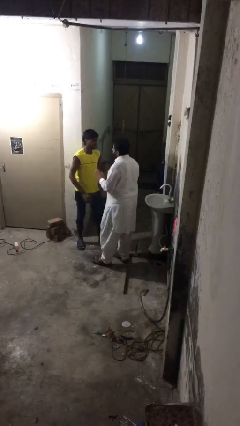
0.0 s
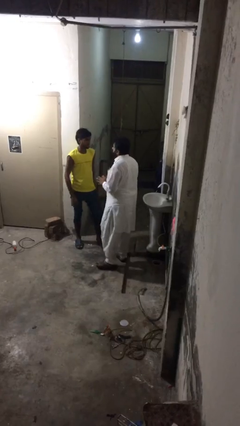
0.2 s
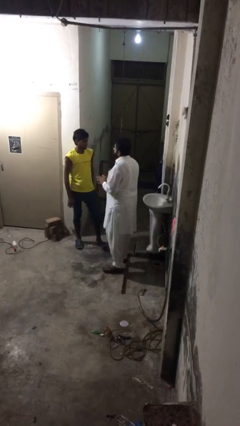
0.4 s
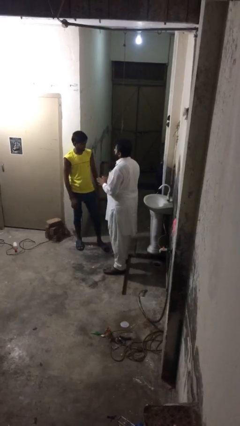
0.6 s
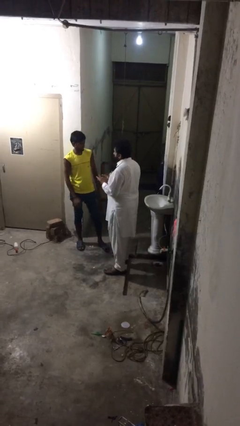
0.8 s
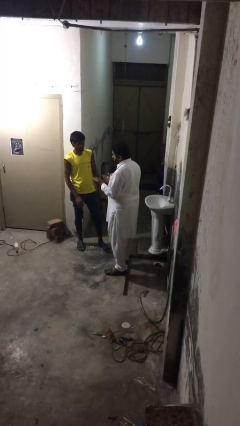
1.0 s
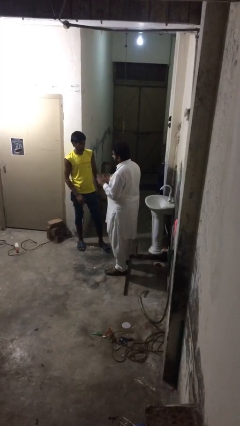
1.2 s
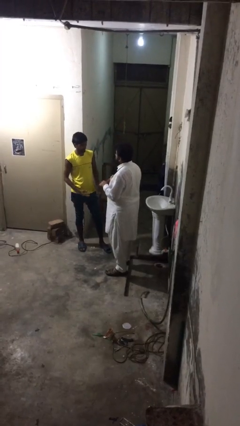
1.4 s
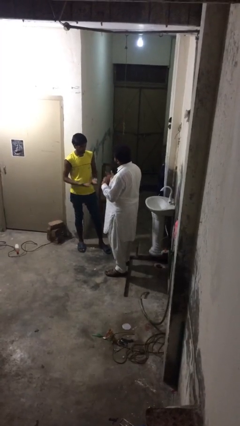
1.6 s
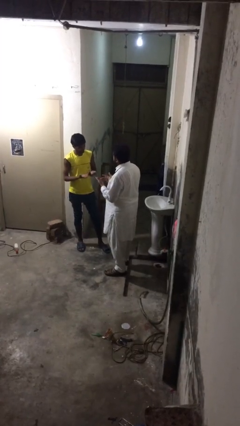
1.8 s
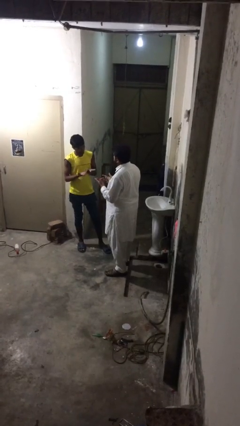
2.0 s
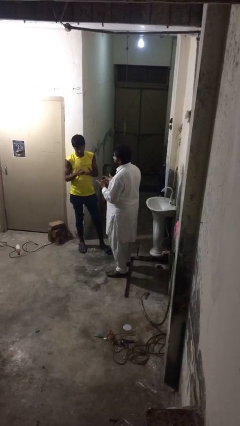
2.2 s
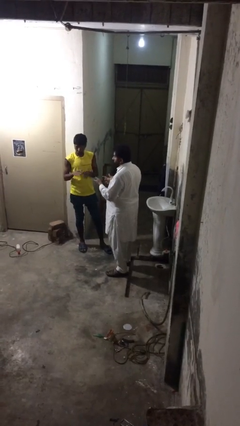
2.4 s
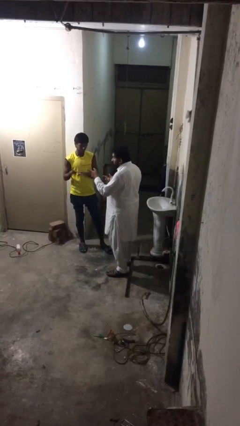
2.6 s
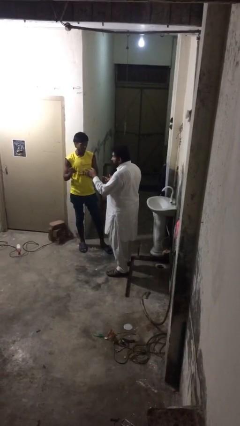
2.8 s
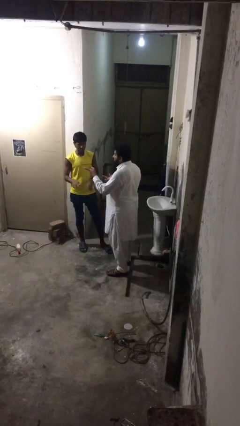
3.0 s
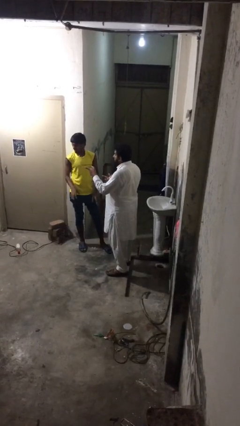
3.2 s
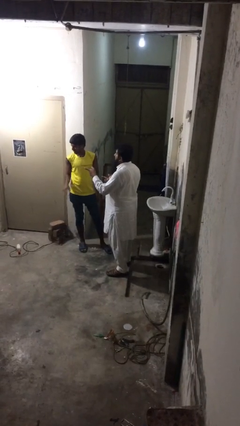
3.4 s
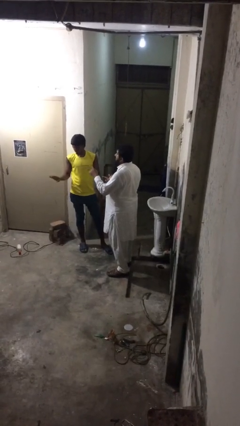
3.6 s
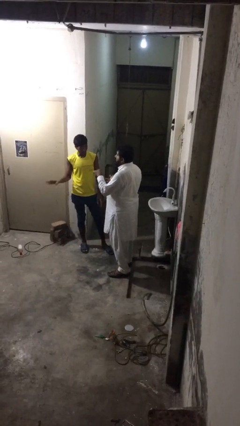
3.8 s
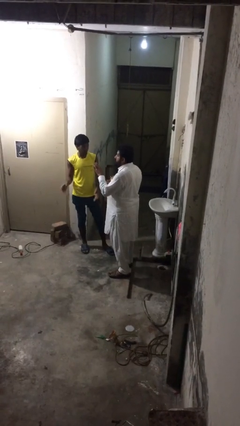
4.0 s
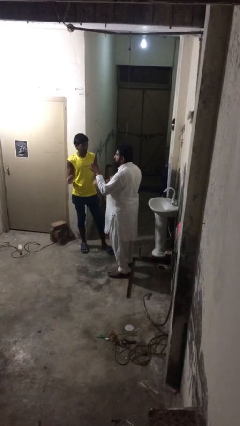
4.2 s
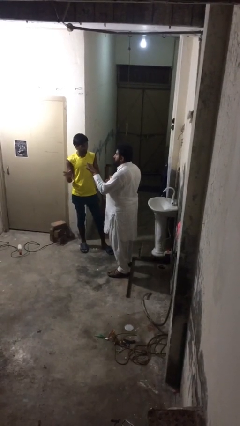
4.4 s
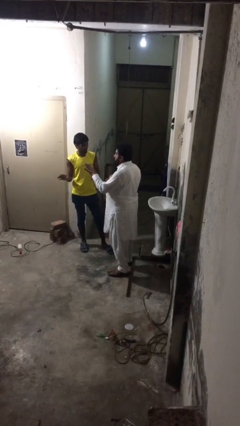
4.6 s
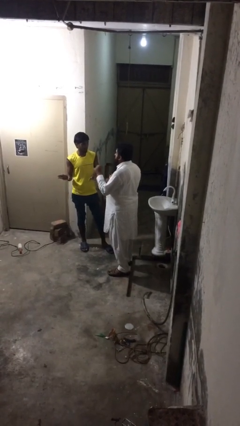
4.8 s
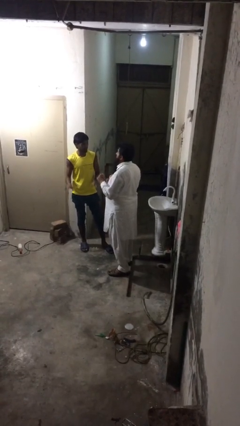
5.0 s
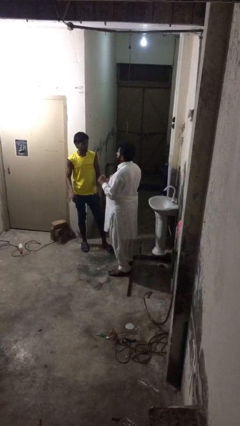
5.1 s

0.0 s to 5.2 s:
person talks to person

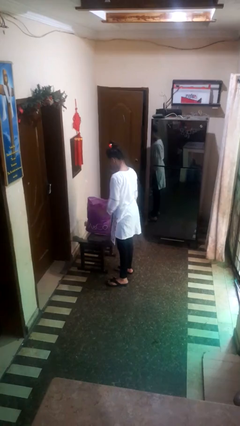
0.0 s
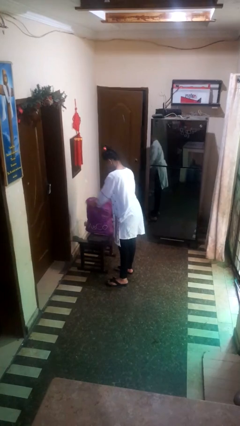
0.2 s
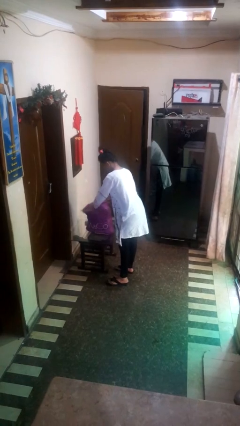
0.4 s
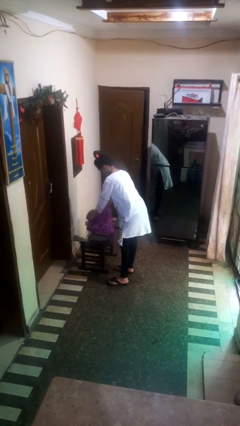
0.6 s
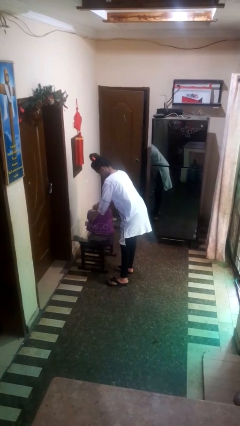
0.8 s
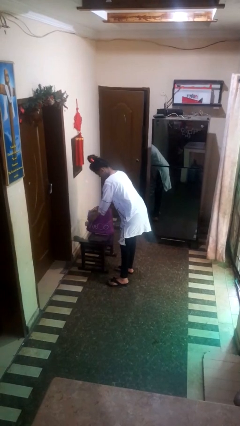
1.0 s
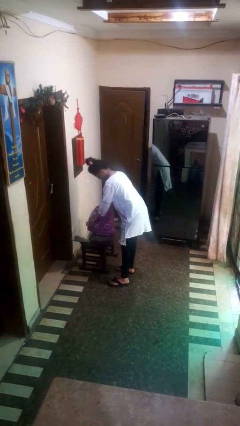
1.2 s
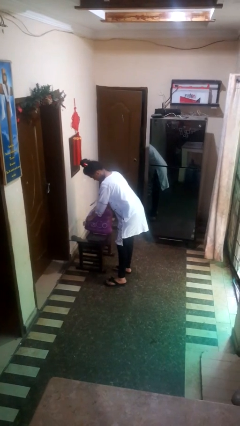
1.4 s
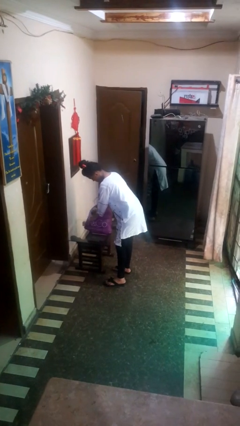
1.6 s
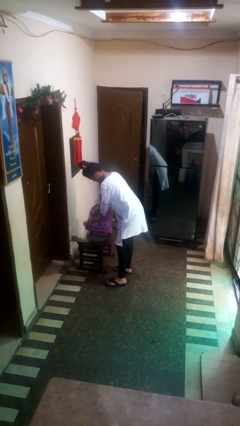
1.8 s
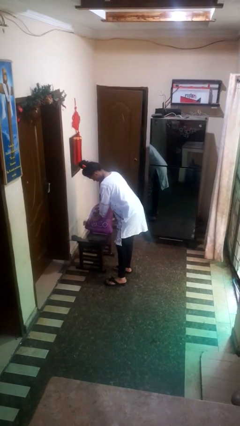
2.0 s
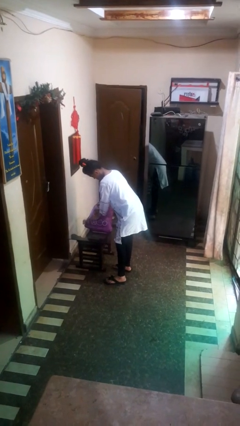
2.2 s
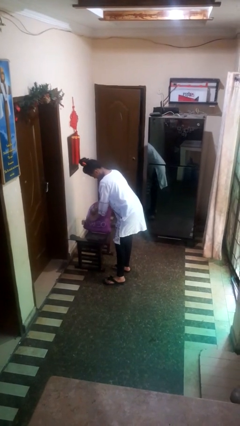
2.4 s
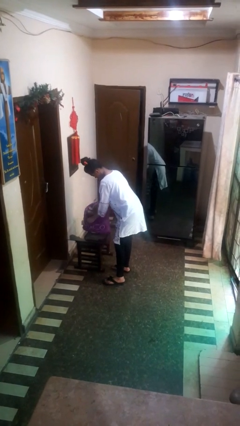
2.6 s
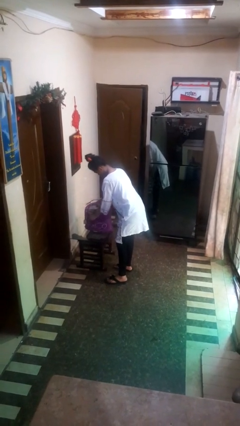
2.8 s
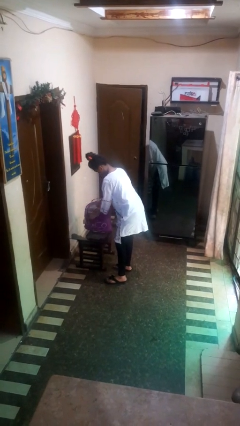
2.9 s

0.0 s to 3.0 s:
person searches in bag

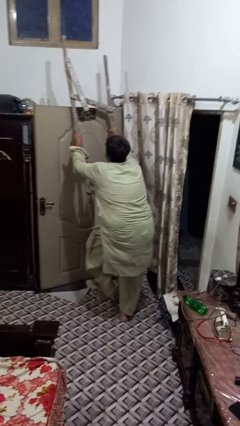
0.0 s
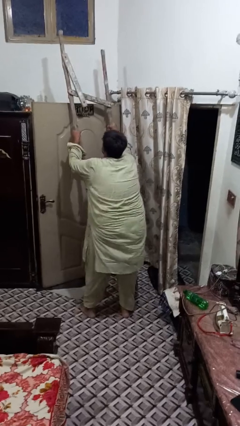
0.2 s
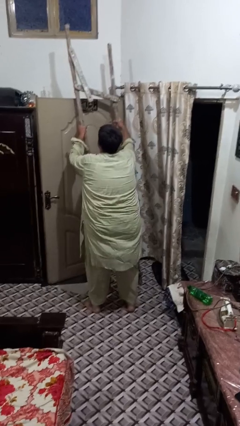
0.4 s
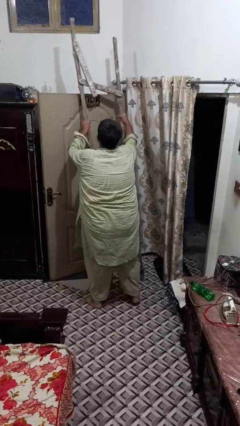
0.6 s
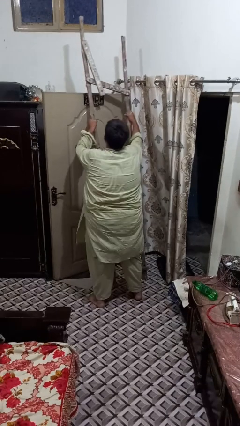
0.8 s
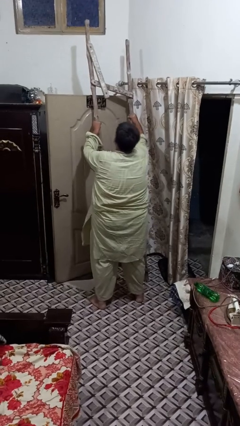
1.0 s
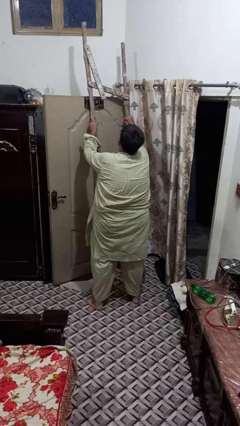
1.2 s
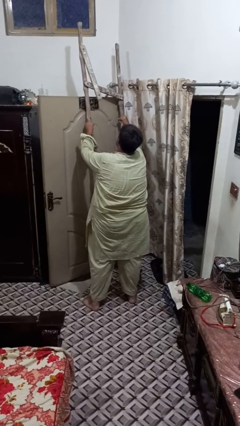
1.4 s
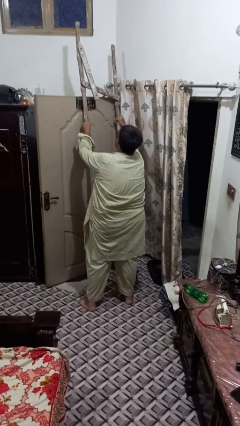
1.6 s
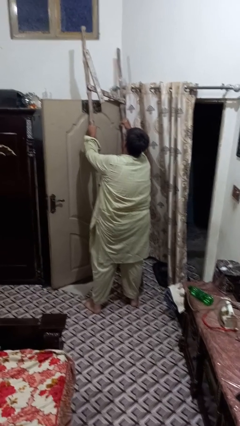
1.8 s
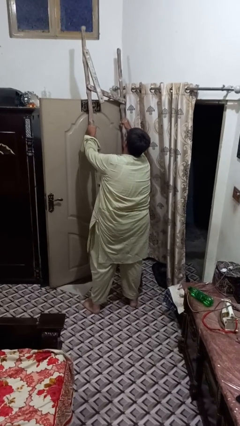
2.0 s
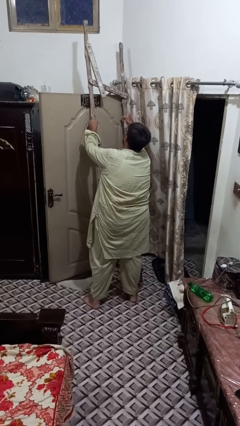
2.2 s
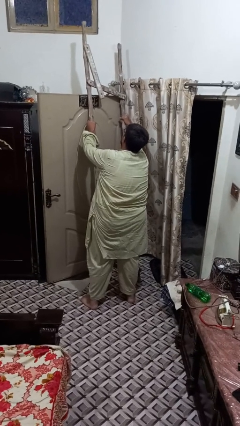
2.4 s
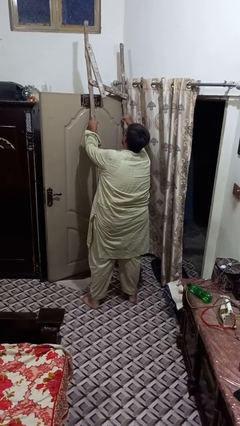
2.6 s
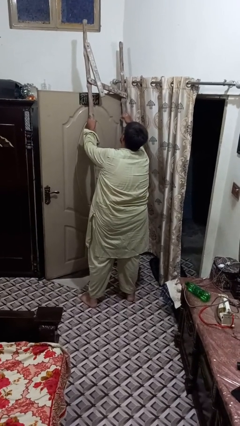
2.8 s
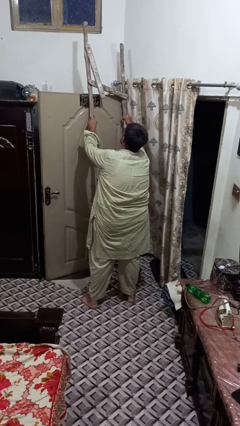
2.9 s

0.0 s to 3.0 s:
person climbs down ladder

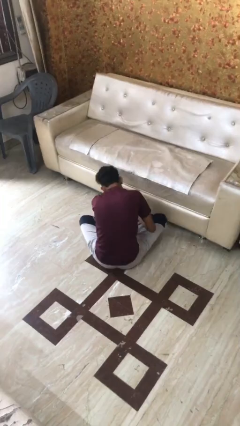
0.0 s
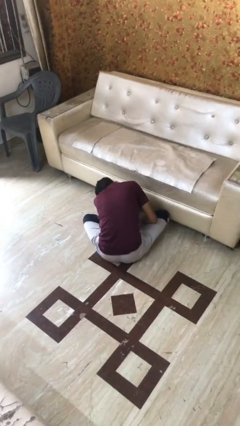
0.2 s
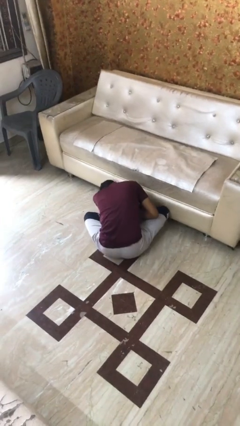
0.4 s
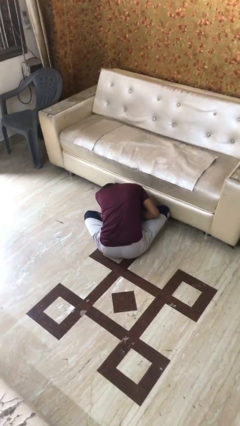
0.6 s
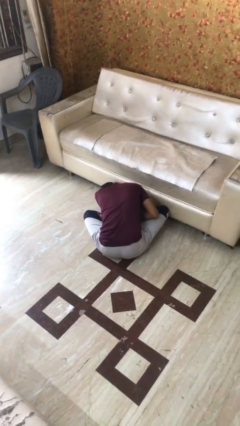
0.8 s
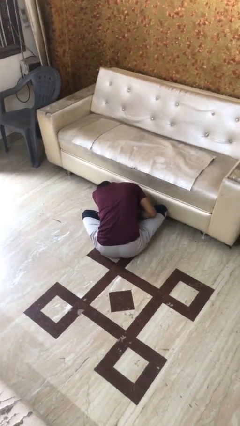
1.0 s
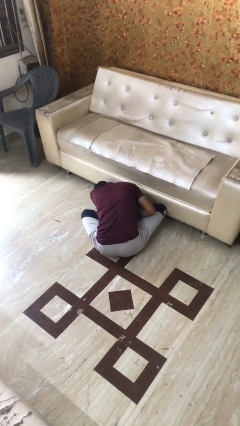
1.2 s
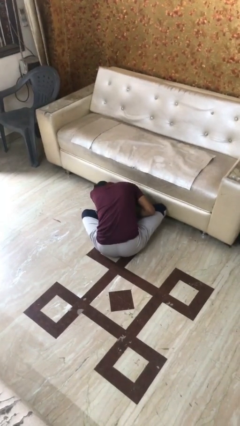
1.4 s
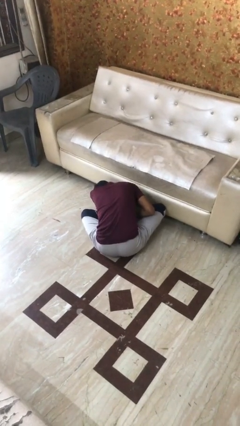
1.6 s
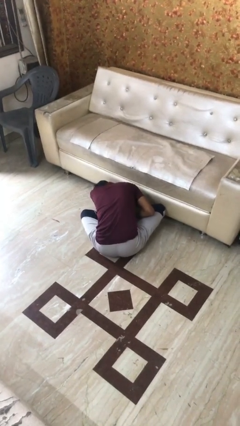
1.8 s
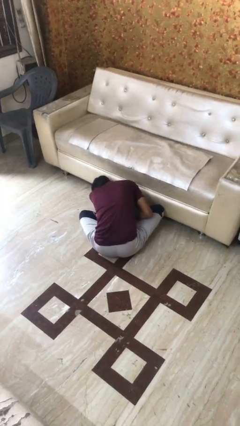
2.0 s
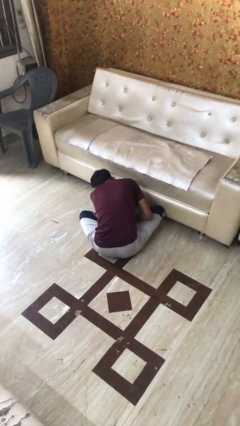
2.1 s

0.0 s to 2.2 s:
person searches under bed

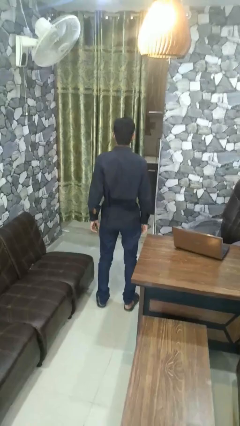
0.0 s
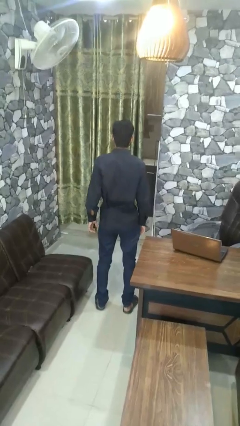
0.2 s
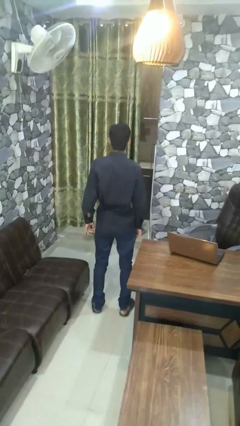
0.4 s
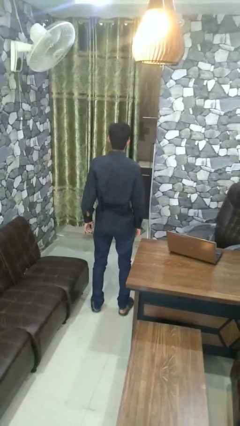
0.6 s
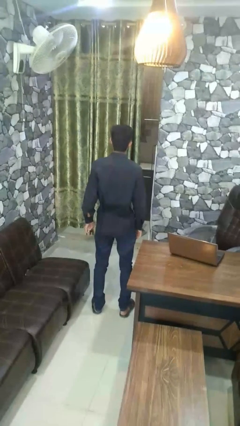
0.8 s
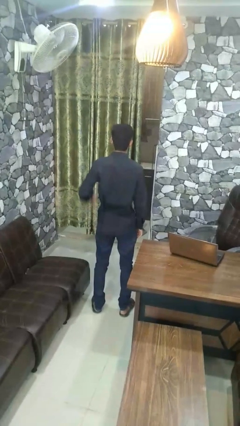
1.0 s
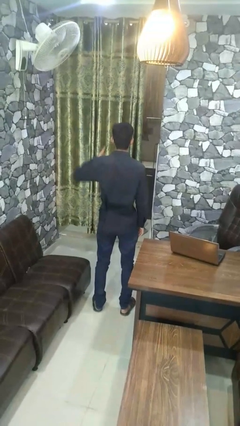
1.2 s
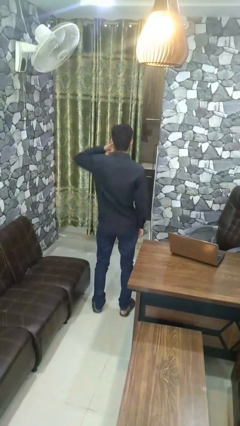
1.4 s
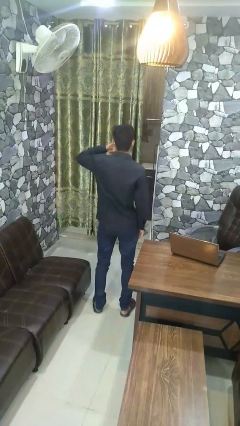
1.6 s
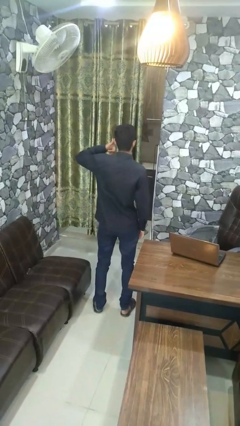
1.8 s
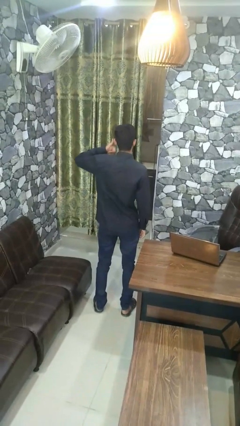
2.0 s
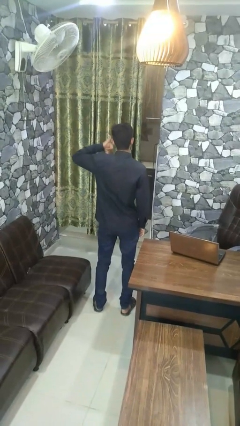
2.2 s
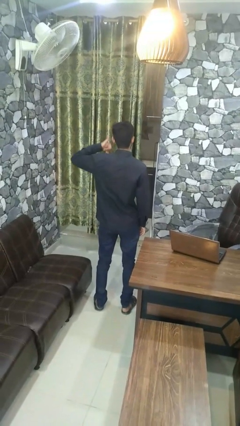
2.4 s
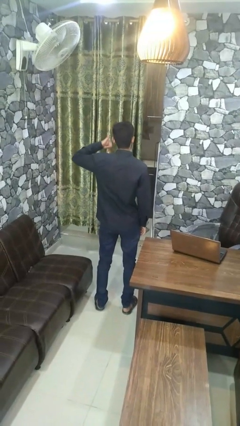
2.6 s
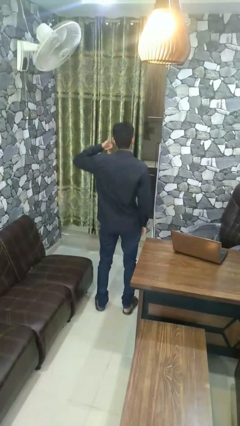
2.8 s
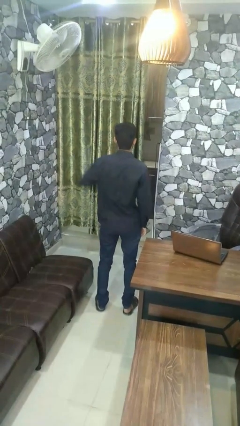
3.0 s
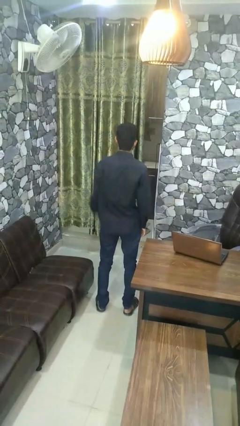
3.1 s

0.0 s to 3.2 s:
person gestures call me

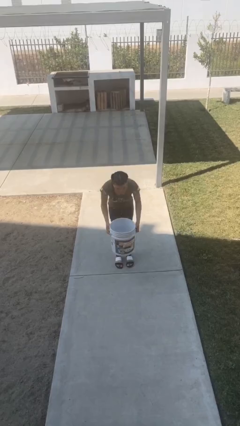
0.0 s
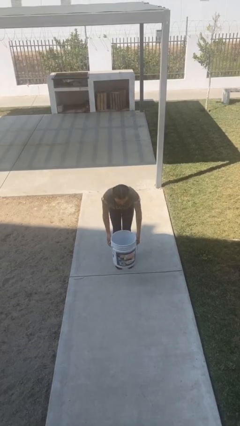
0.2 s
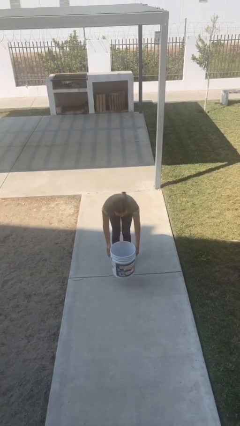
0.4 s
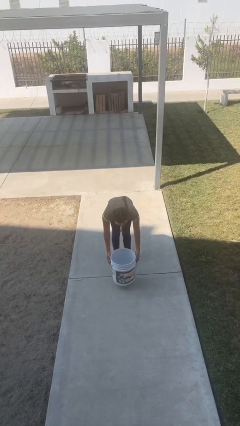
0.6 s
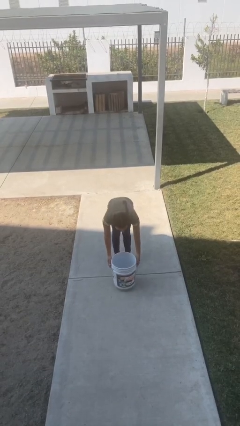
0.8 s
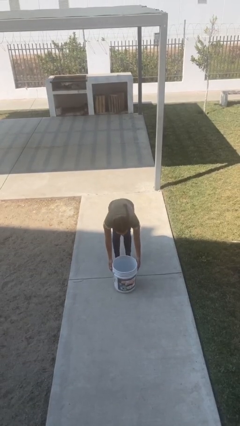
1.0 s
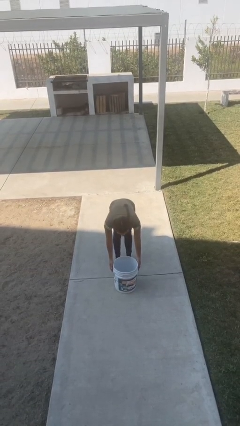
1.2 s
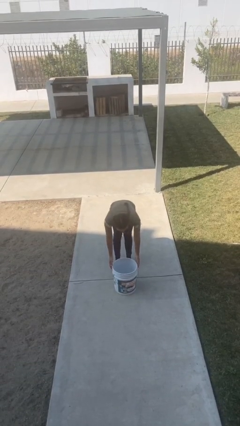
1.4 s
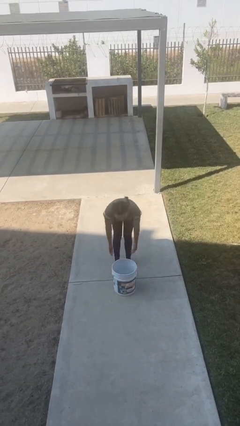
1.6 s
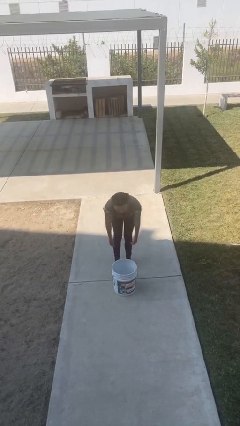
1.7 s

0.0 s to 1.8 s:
person puts down object on floor
